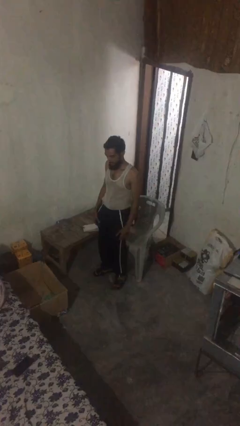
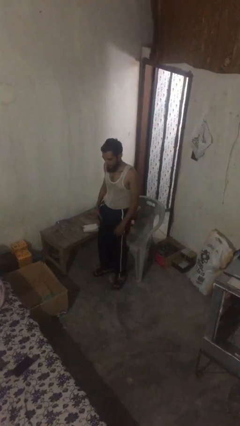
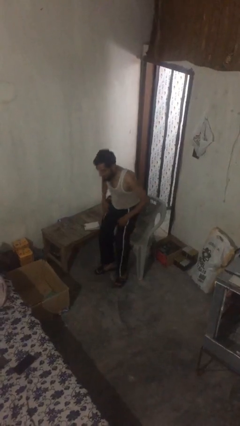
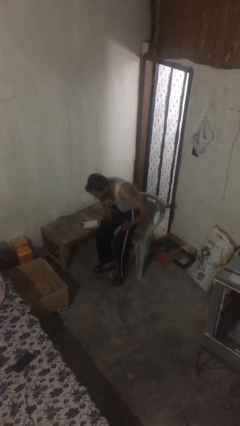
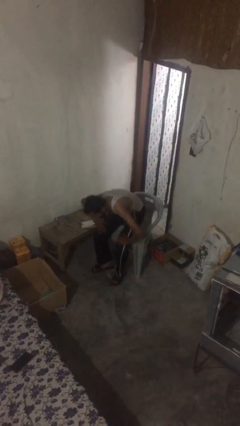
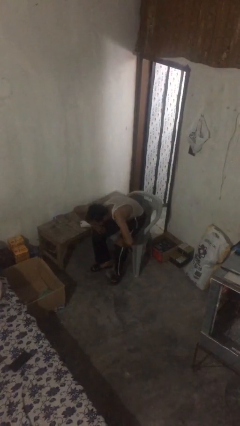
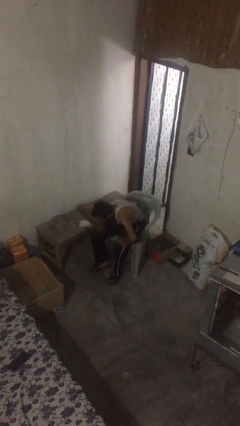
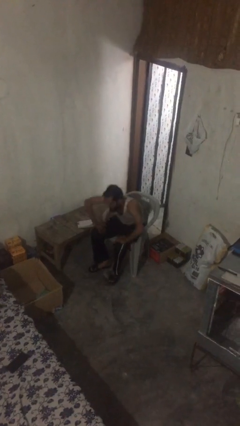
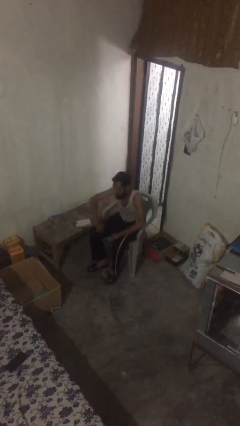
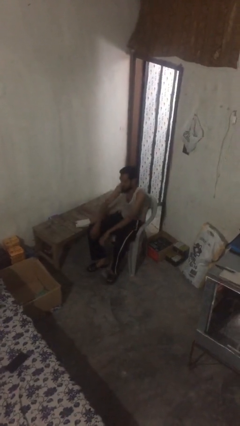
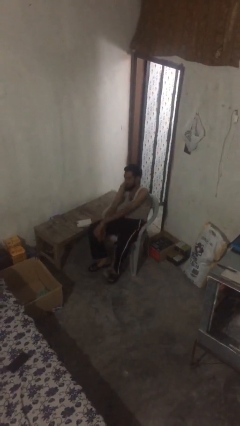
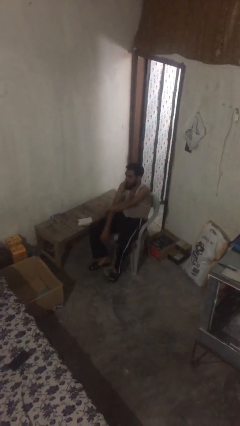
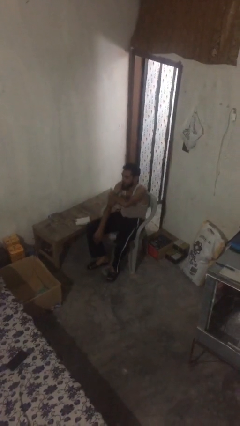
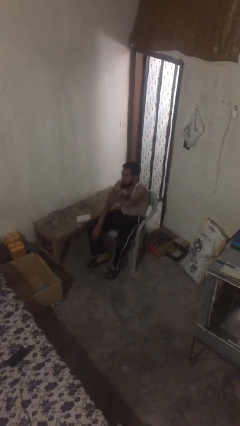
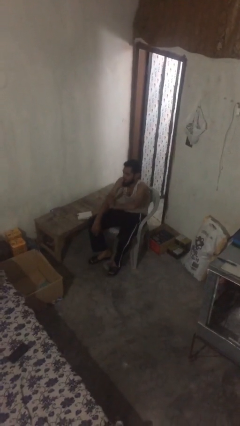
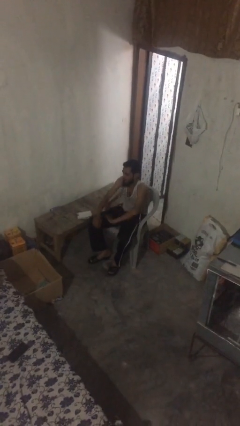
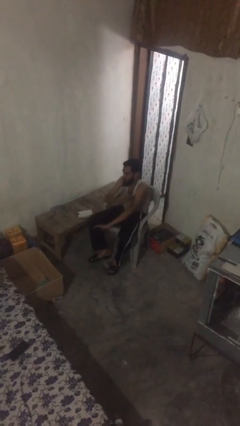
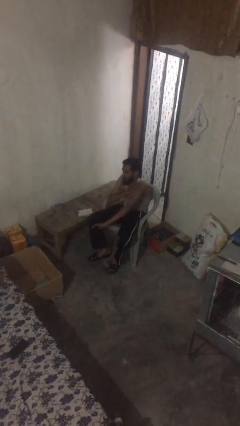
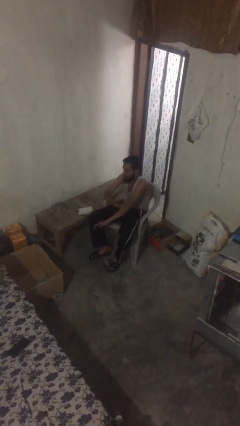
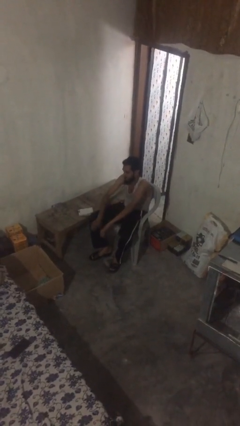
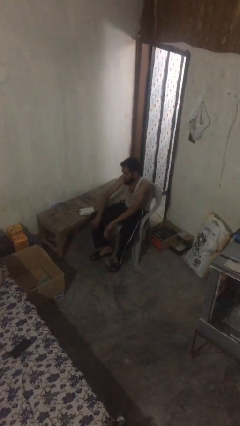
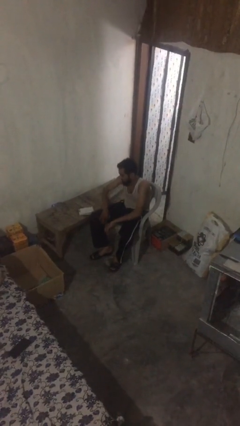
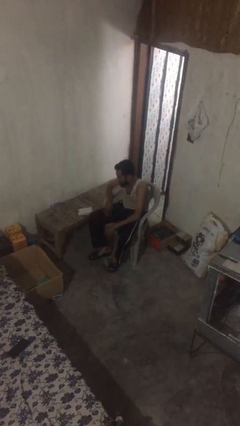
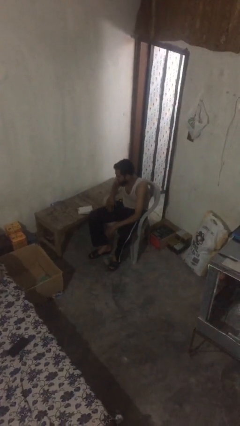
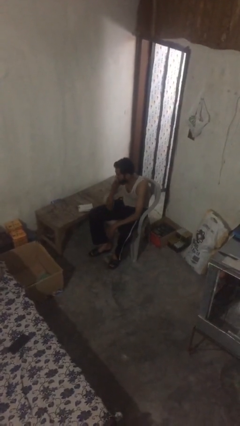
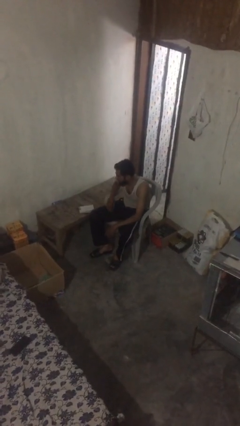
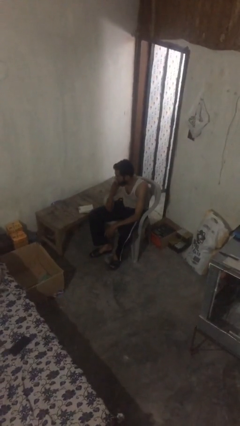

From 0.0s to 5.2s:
person sits down

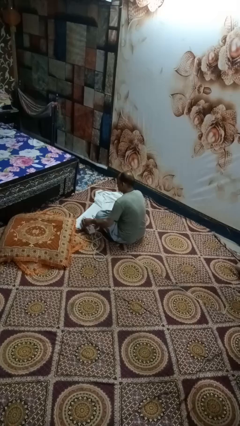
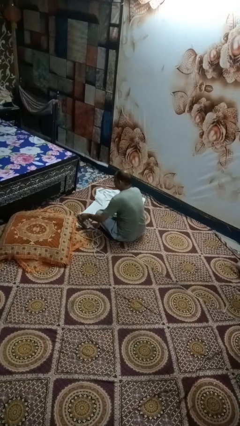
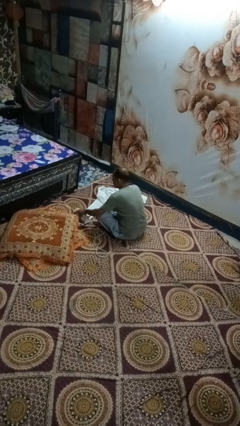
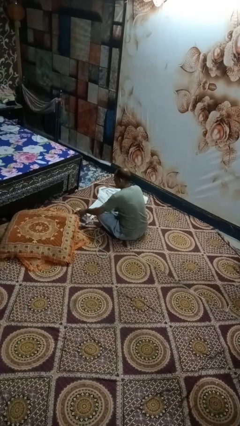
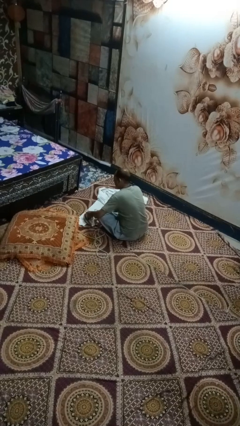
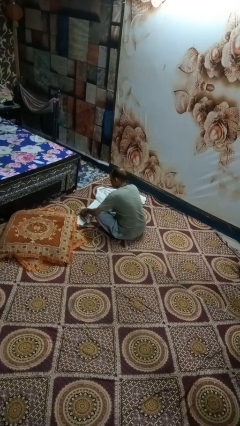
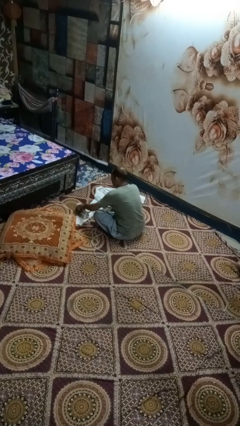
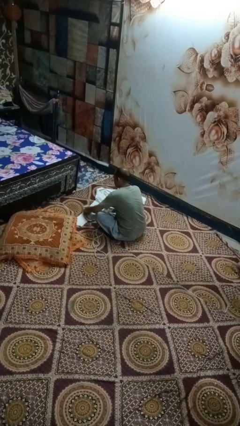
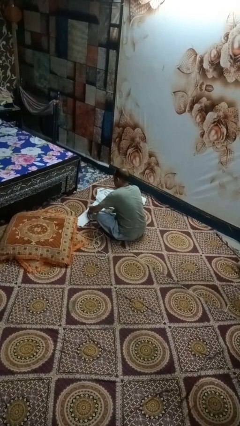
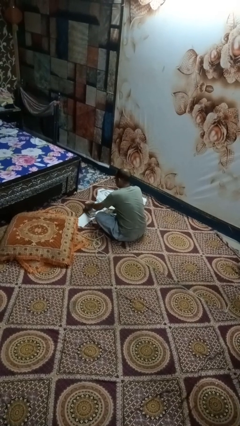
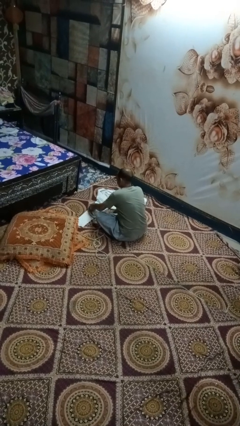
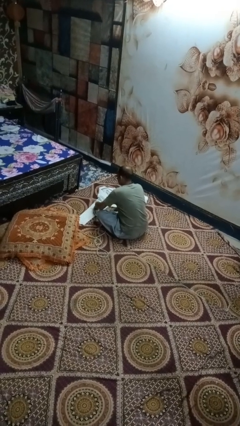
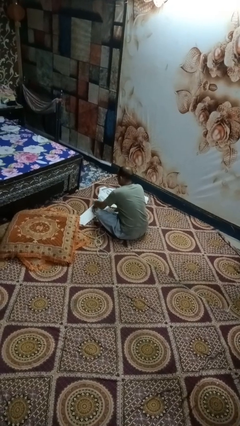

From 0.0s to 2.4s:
person irons clothes

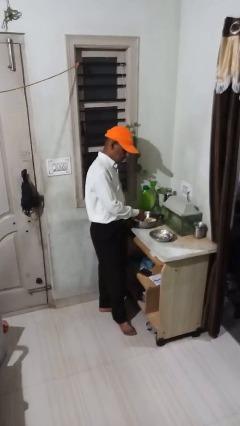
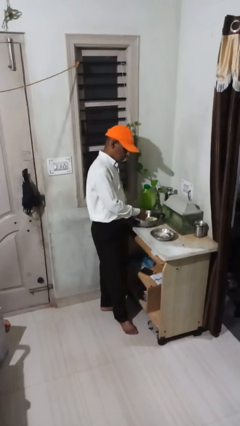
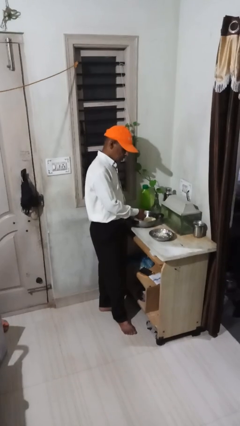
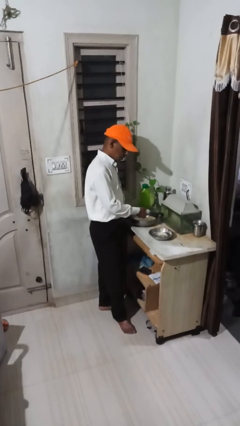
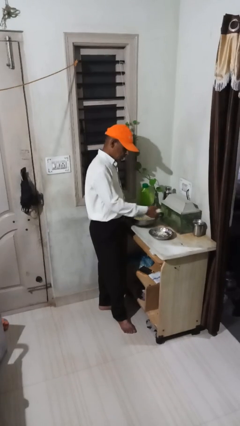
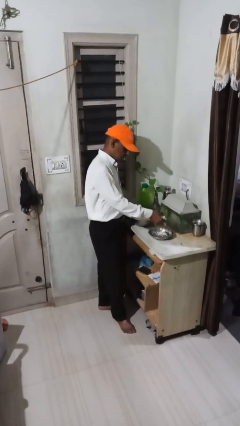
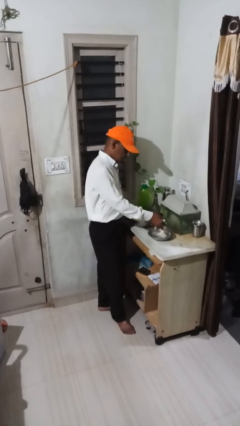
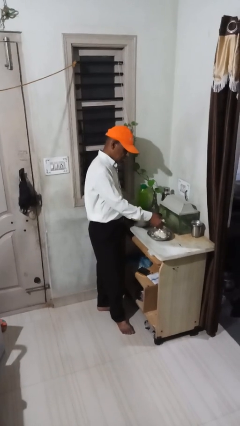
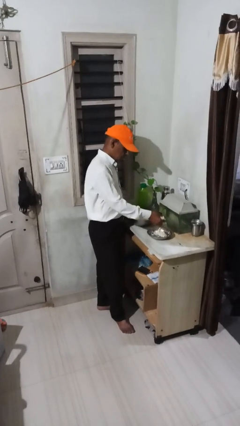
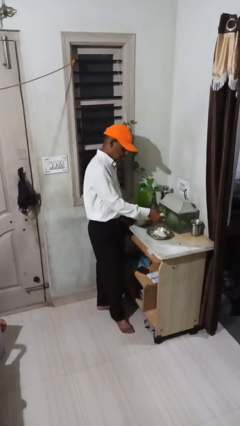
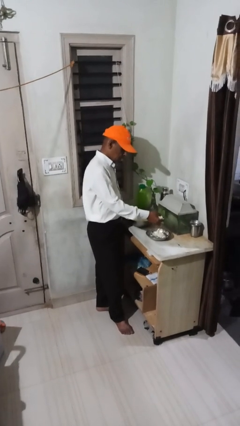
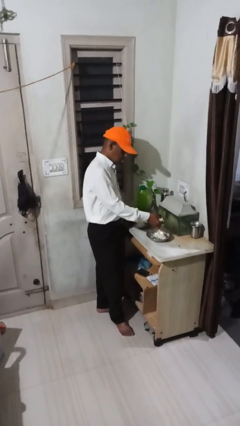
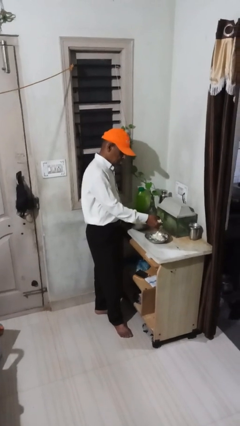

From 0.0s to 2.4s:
person pours into bowl

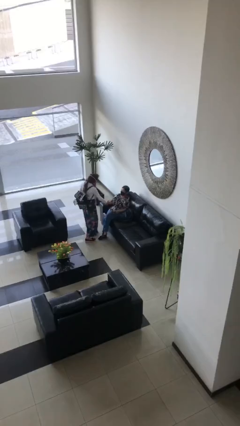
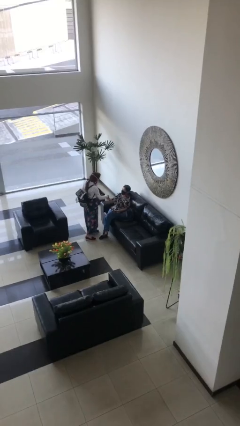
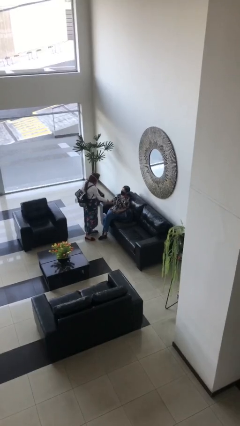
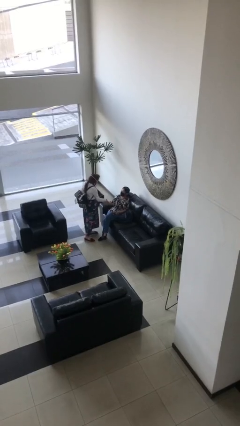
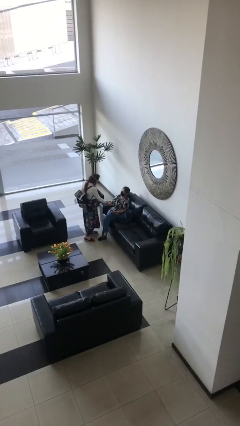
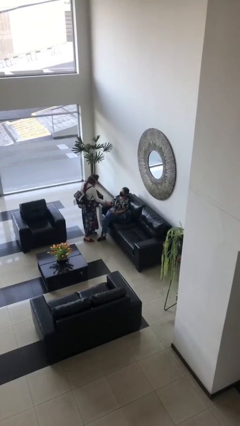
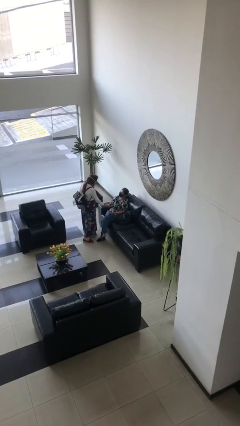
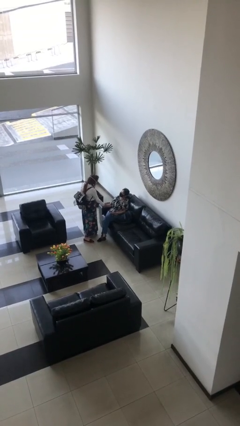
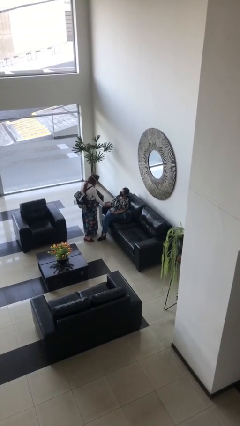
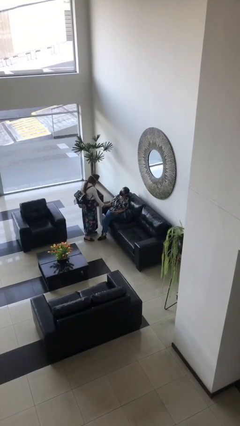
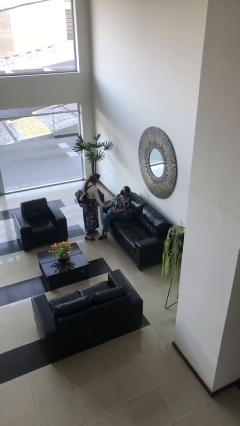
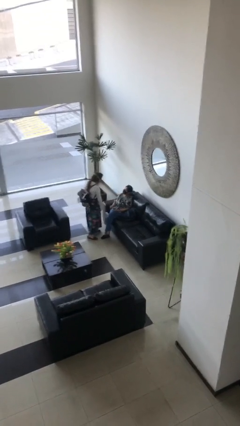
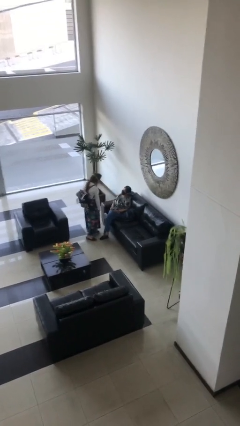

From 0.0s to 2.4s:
person shakes hand

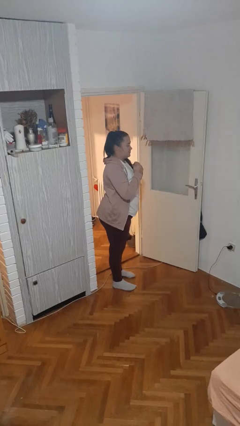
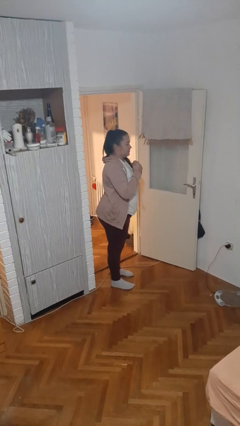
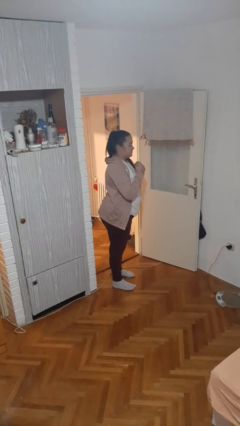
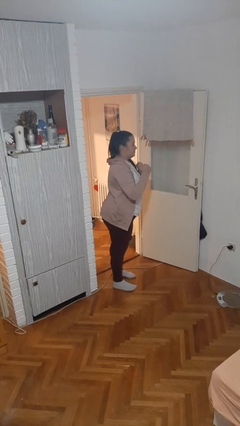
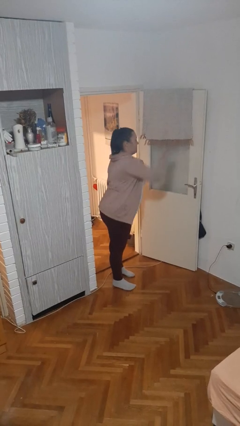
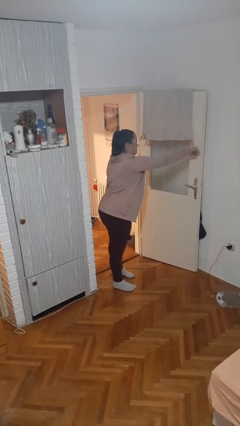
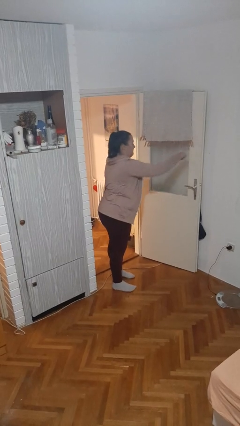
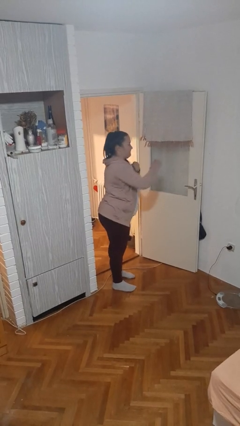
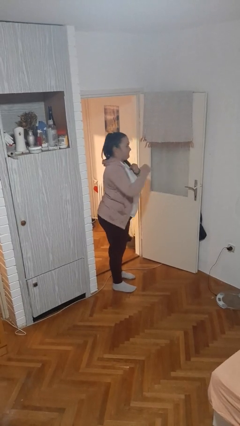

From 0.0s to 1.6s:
person punches

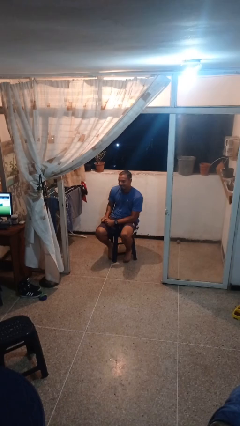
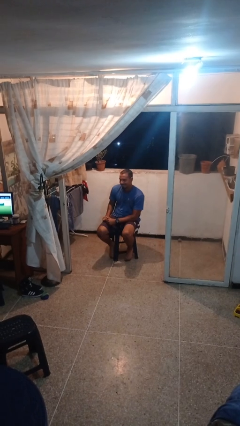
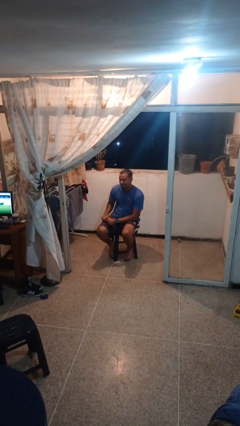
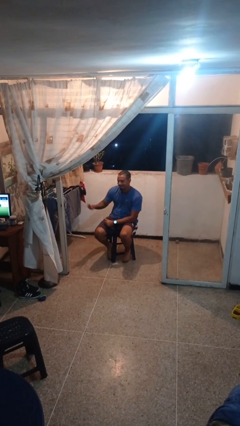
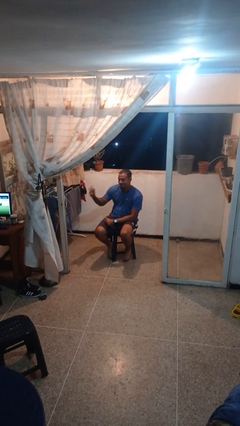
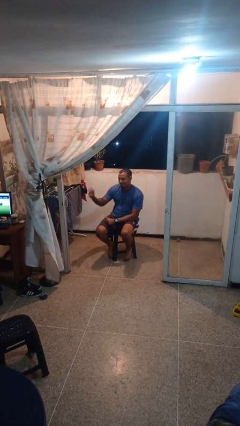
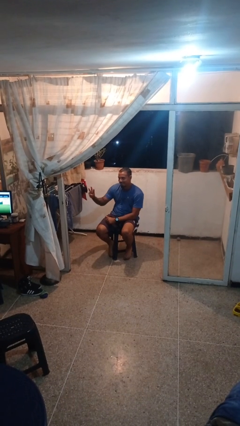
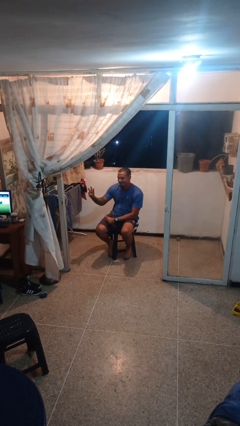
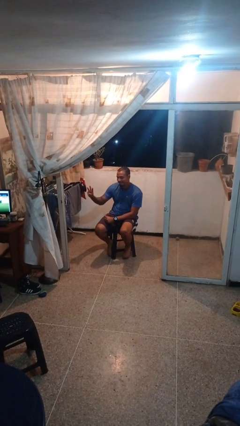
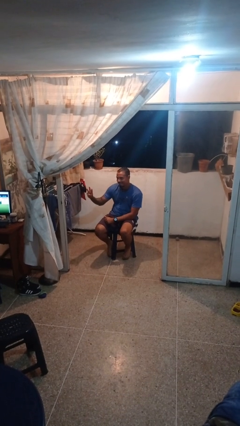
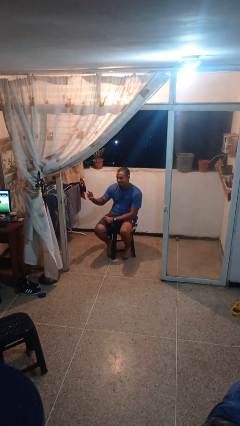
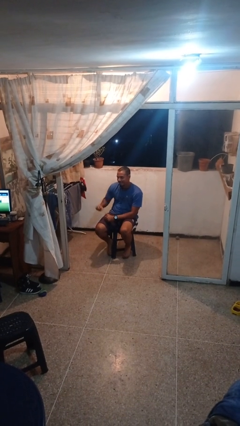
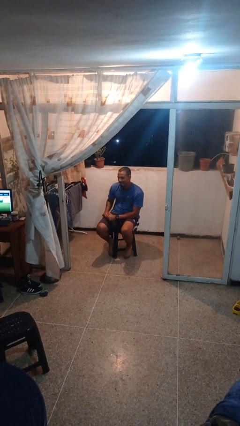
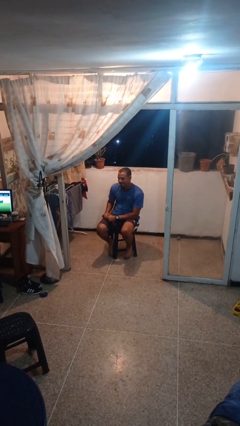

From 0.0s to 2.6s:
person gestures number three

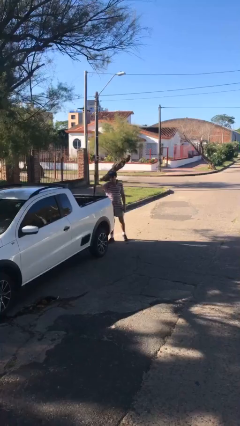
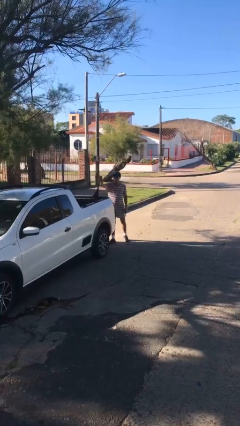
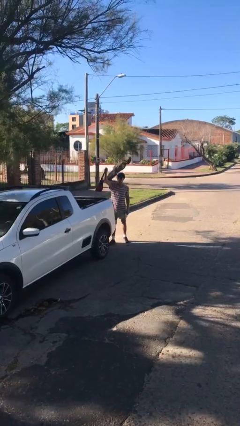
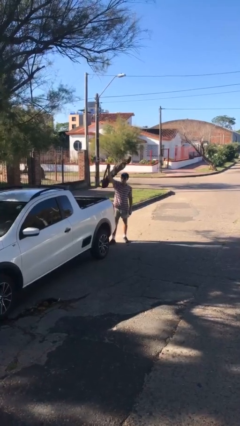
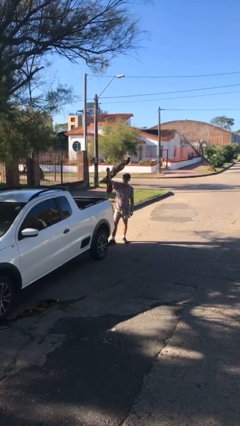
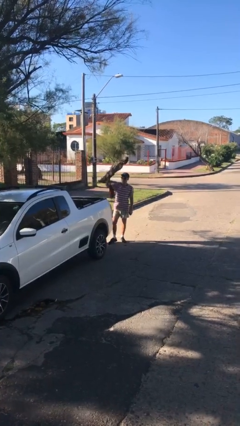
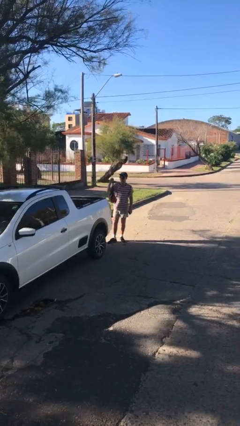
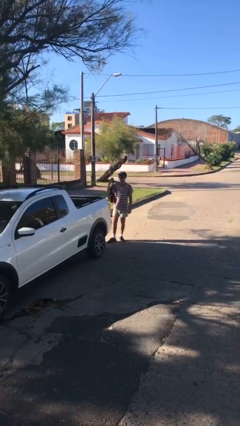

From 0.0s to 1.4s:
person unloads car
